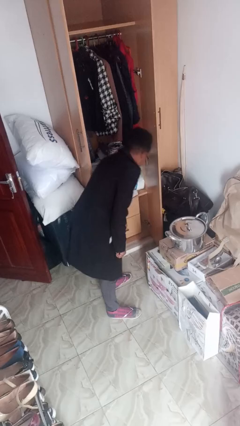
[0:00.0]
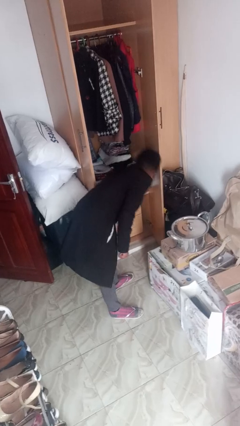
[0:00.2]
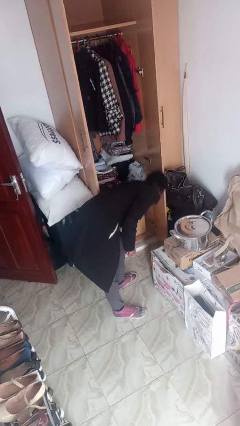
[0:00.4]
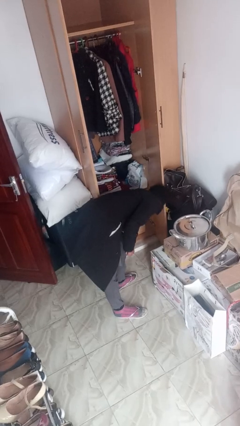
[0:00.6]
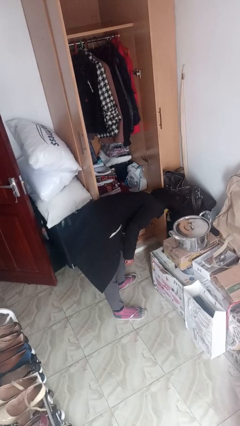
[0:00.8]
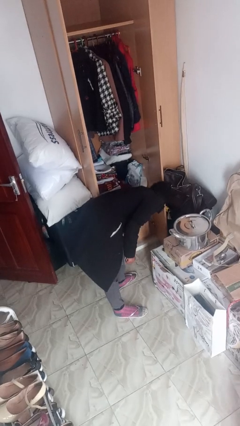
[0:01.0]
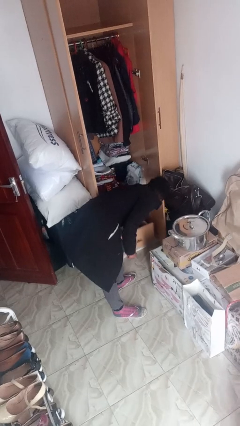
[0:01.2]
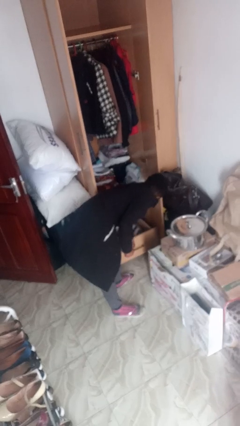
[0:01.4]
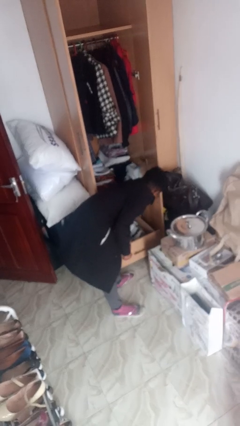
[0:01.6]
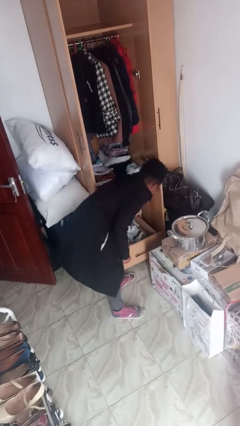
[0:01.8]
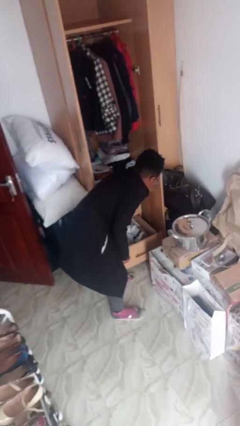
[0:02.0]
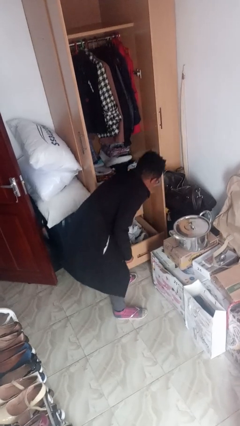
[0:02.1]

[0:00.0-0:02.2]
person opens dresser drawer

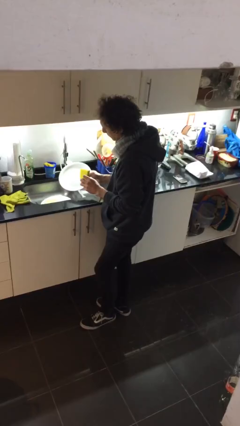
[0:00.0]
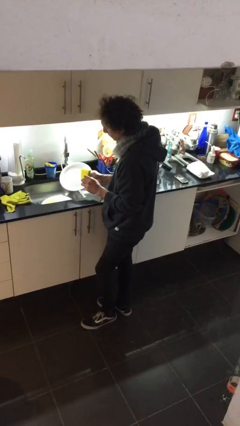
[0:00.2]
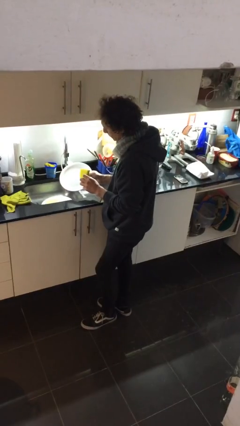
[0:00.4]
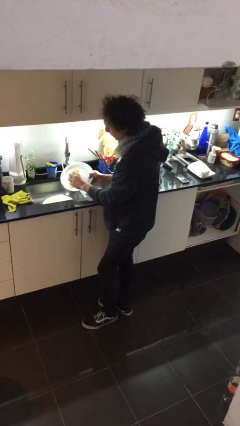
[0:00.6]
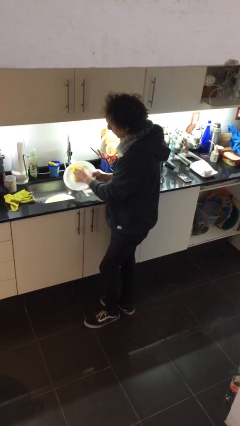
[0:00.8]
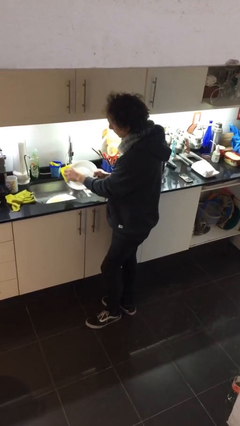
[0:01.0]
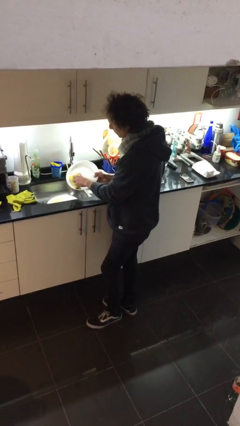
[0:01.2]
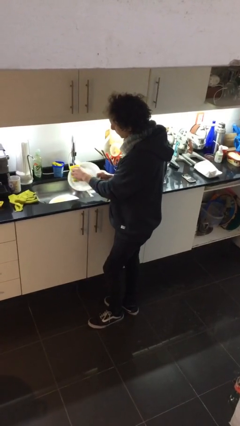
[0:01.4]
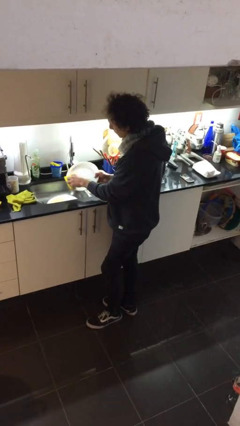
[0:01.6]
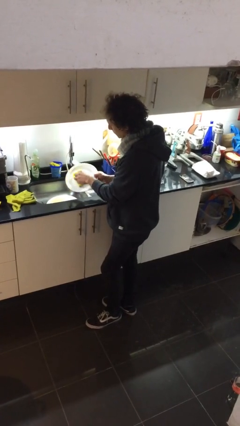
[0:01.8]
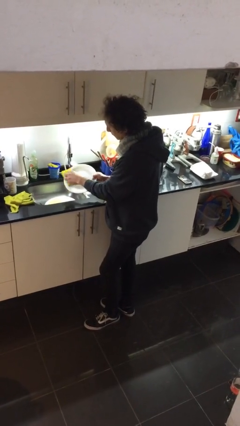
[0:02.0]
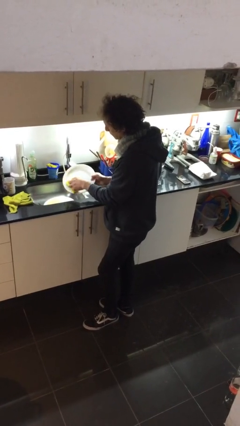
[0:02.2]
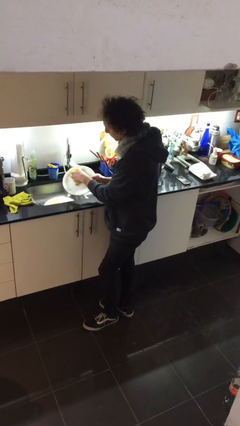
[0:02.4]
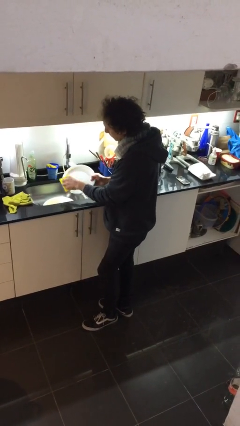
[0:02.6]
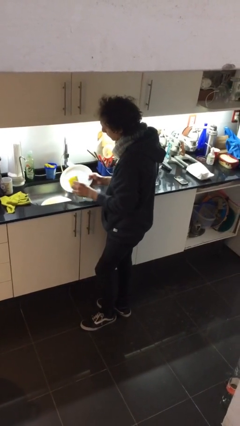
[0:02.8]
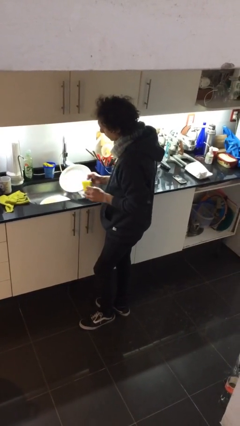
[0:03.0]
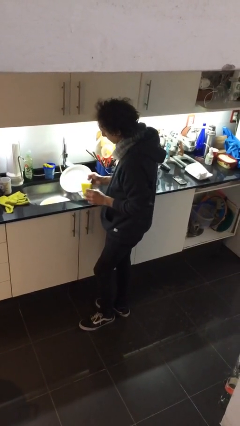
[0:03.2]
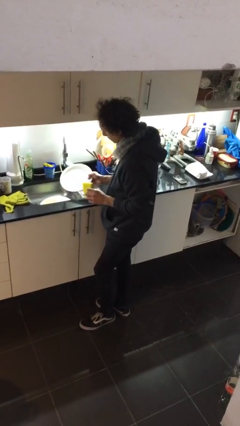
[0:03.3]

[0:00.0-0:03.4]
person washes dish

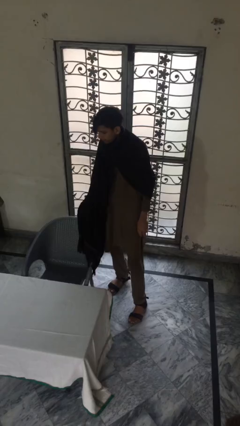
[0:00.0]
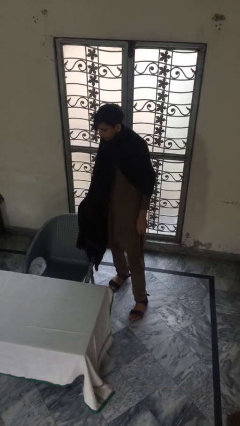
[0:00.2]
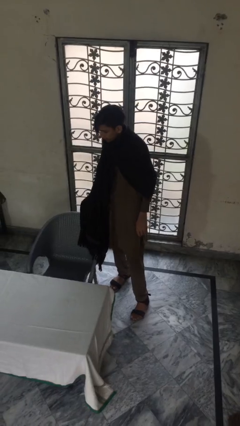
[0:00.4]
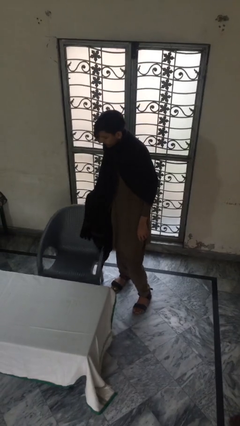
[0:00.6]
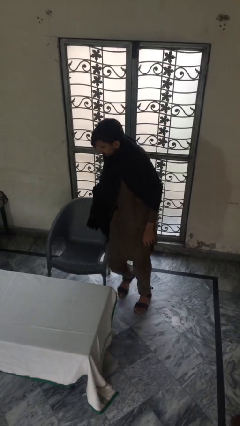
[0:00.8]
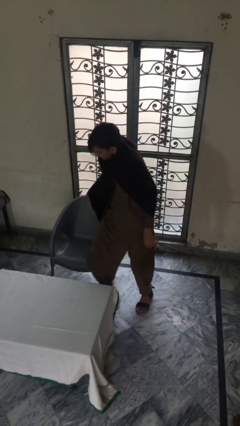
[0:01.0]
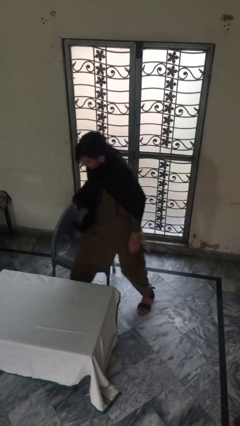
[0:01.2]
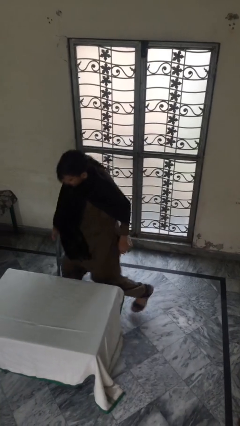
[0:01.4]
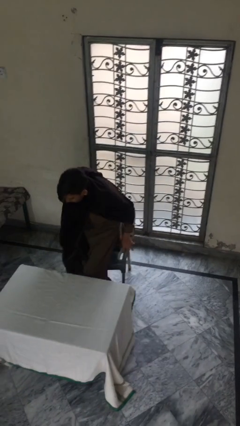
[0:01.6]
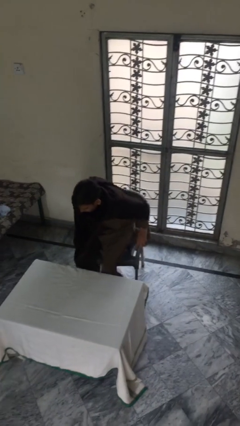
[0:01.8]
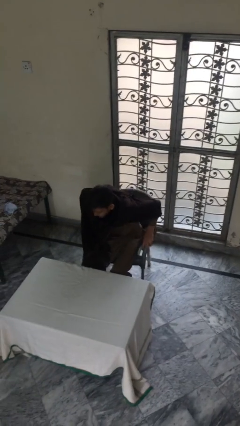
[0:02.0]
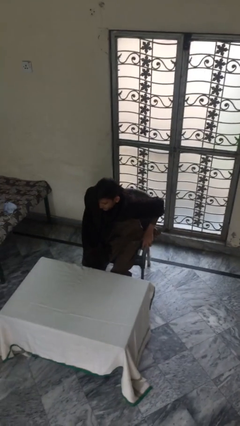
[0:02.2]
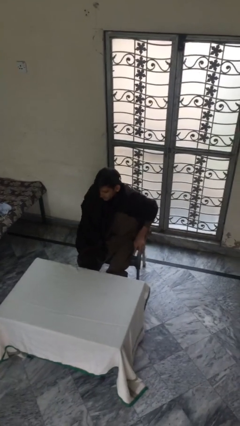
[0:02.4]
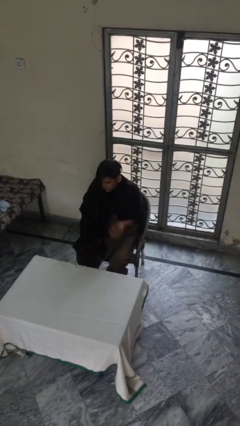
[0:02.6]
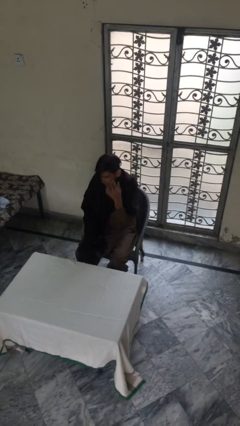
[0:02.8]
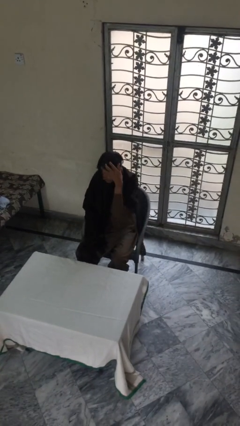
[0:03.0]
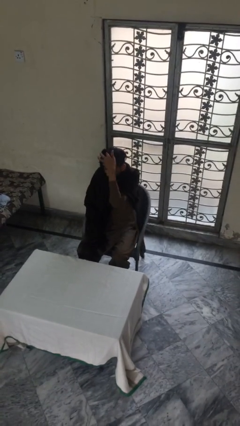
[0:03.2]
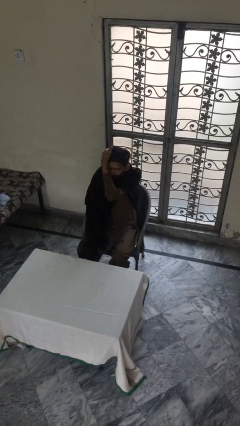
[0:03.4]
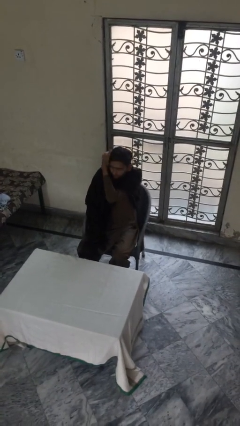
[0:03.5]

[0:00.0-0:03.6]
person sits down

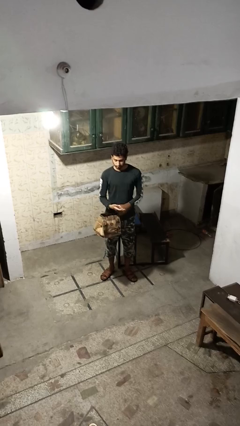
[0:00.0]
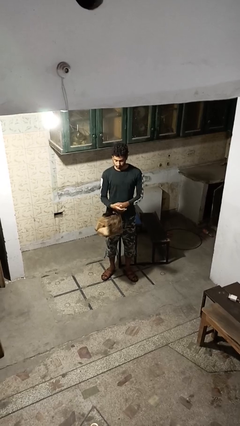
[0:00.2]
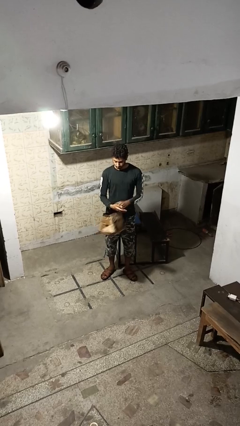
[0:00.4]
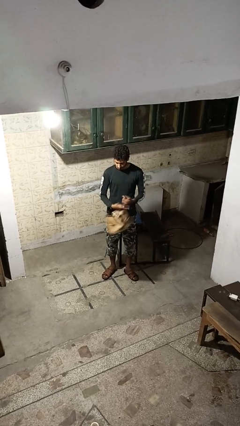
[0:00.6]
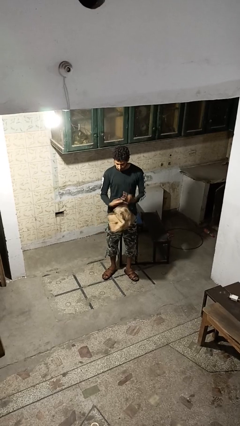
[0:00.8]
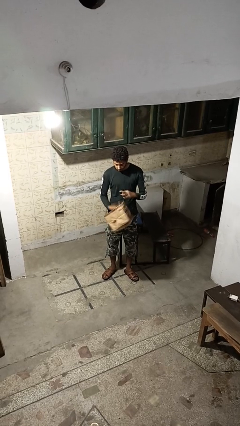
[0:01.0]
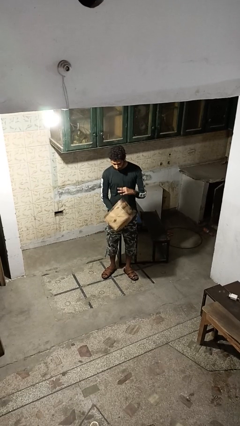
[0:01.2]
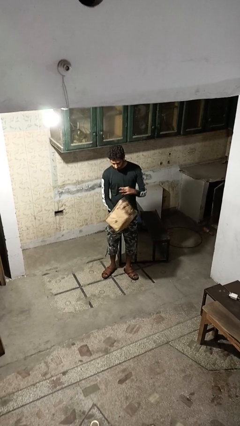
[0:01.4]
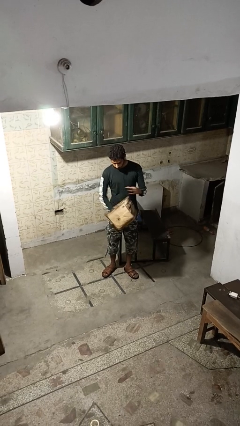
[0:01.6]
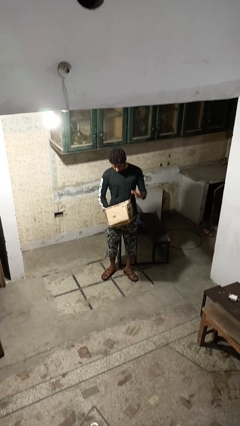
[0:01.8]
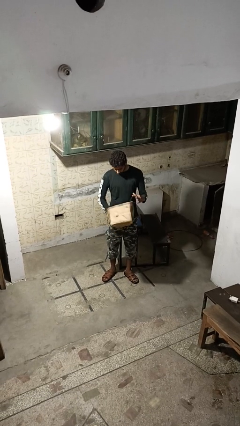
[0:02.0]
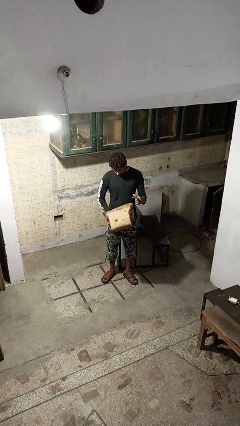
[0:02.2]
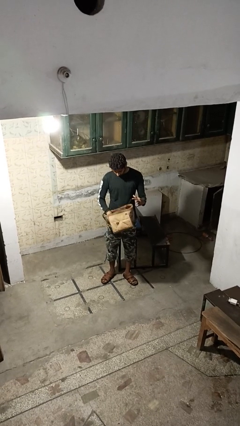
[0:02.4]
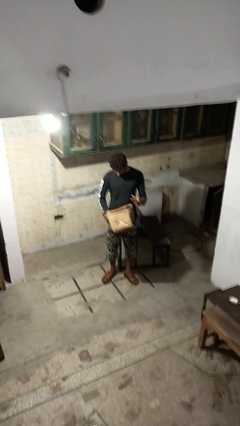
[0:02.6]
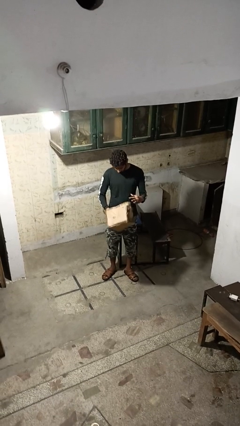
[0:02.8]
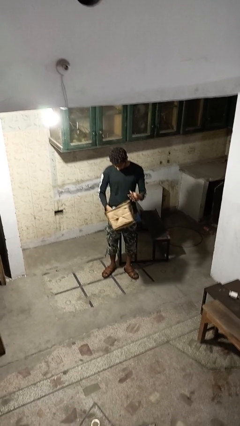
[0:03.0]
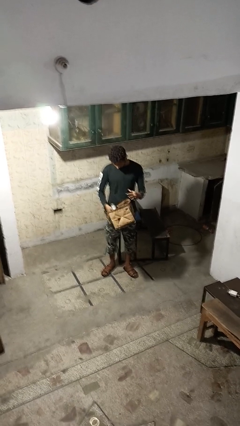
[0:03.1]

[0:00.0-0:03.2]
person searches in purse

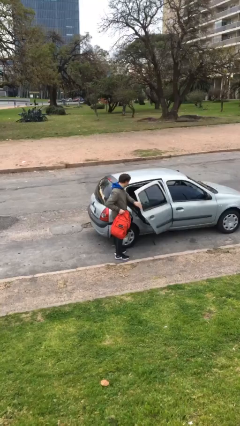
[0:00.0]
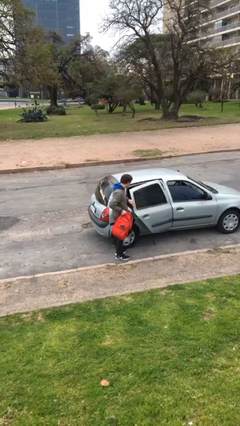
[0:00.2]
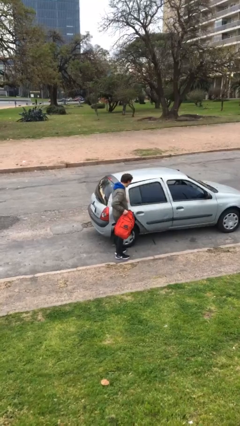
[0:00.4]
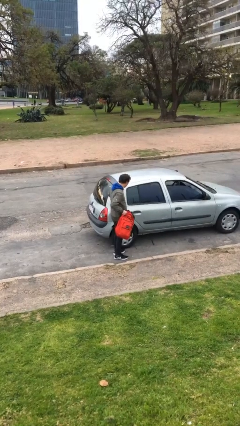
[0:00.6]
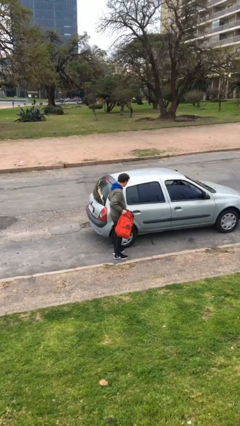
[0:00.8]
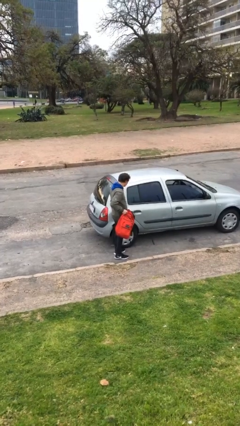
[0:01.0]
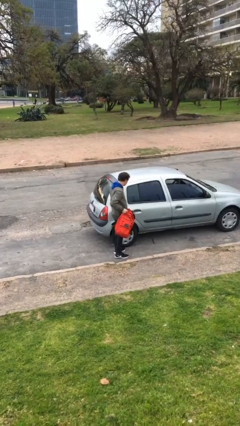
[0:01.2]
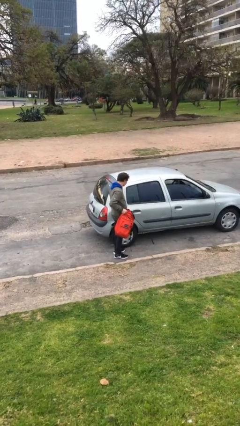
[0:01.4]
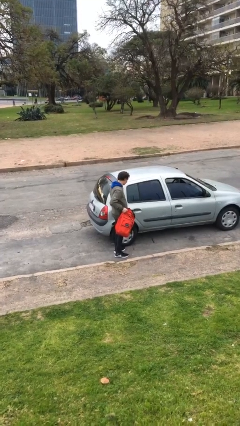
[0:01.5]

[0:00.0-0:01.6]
person closes car door

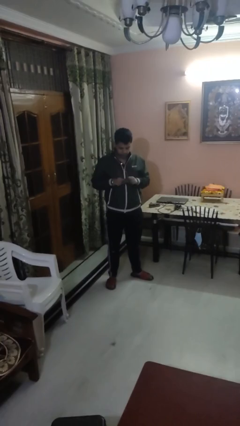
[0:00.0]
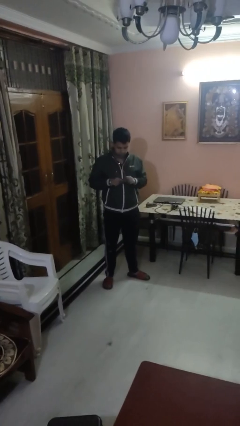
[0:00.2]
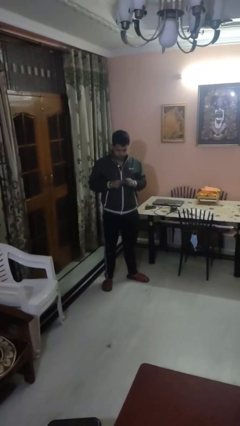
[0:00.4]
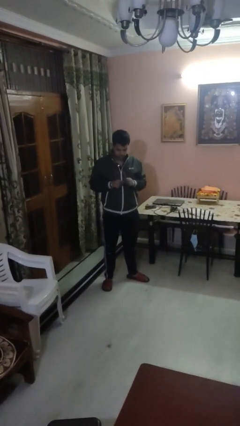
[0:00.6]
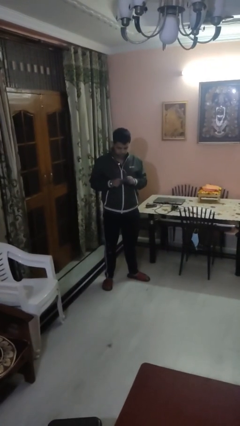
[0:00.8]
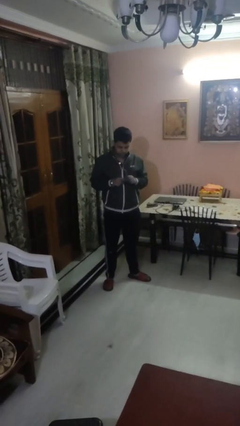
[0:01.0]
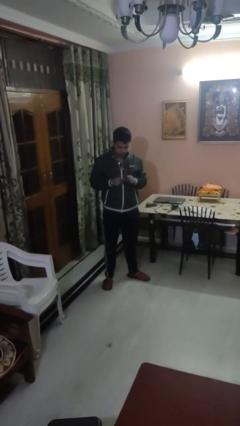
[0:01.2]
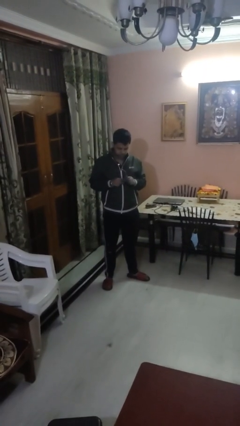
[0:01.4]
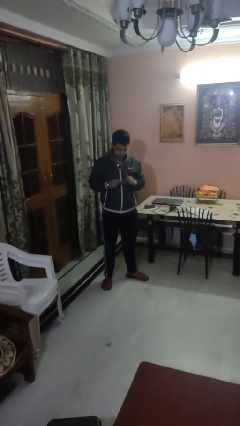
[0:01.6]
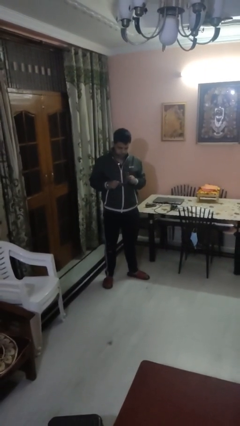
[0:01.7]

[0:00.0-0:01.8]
person cleans eyeglasses

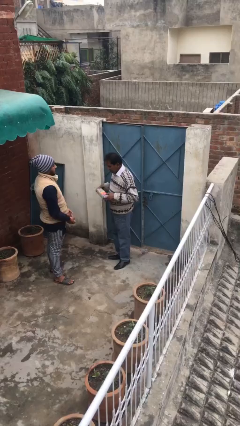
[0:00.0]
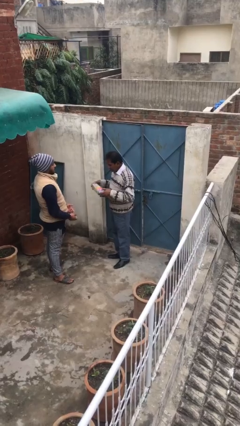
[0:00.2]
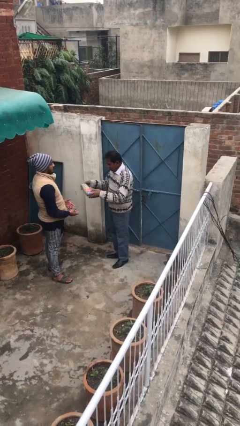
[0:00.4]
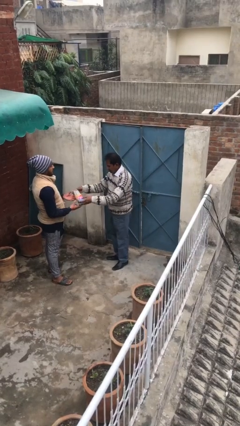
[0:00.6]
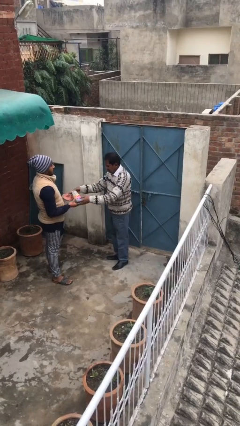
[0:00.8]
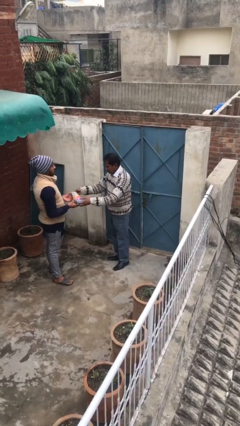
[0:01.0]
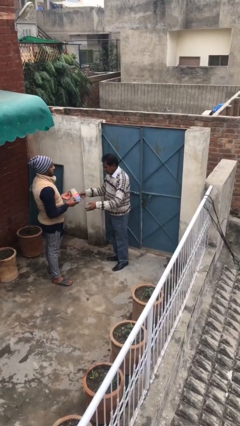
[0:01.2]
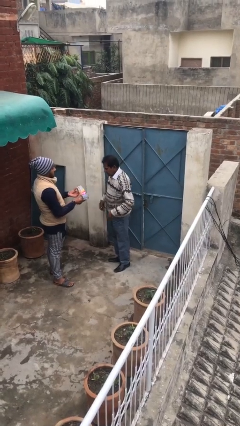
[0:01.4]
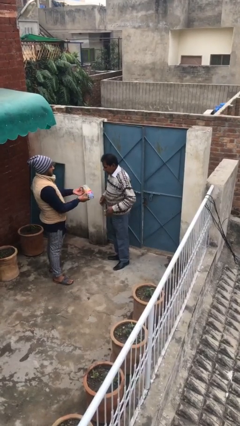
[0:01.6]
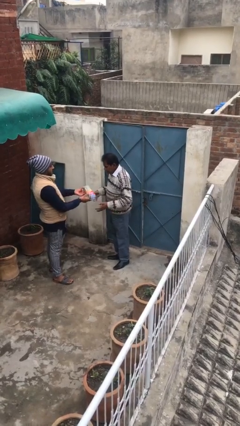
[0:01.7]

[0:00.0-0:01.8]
person transfers object to person
